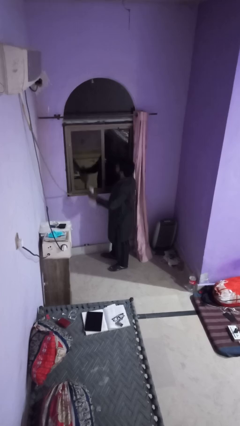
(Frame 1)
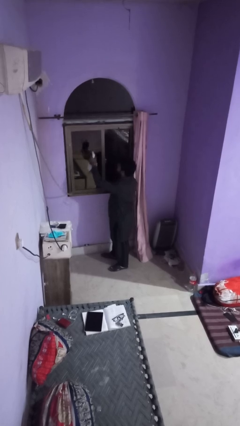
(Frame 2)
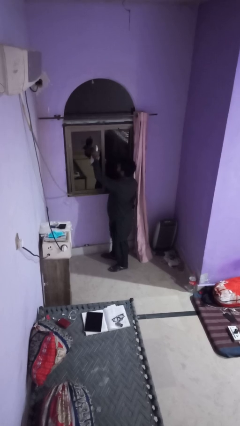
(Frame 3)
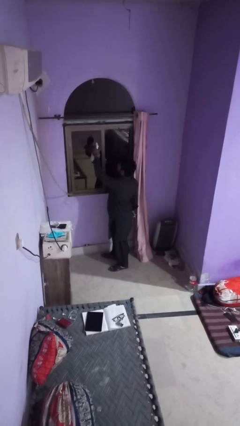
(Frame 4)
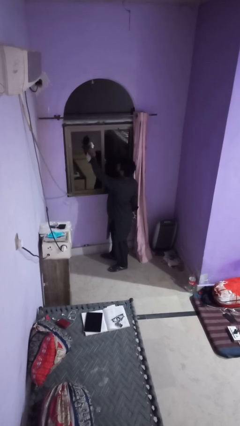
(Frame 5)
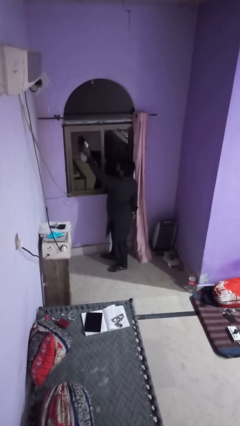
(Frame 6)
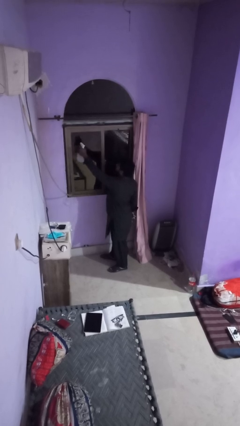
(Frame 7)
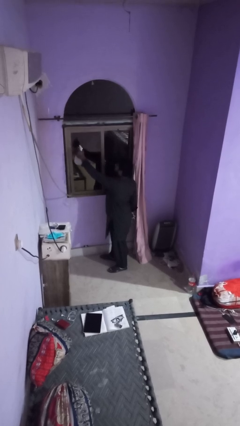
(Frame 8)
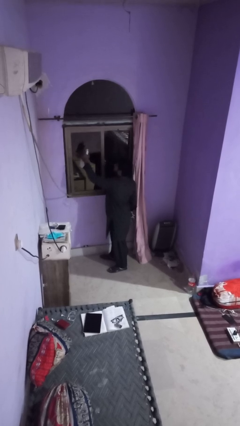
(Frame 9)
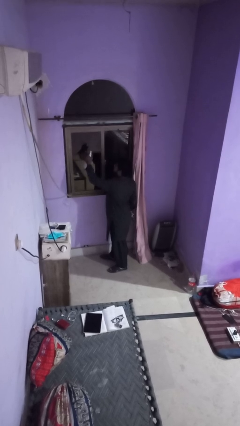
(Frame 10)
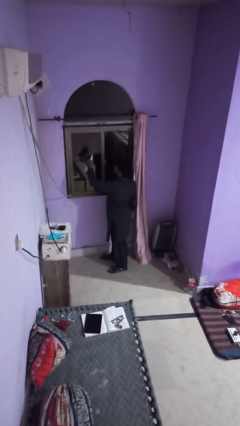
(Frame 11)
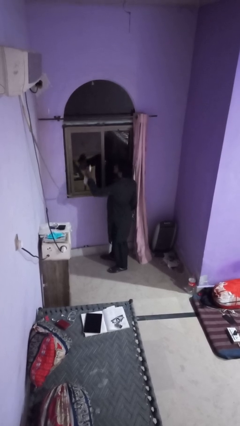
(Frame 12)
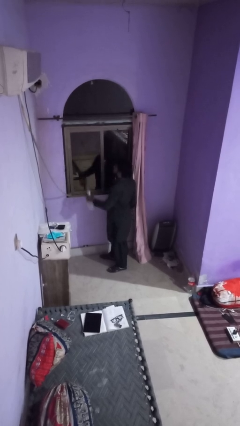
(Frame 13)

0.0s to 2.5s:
person sprays from bottle

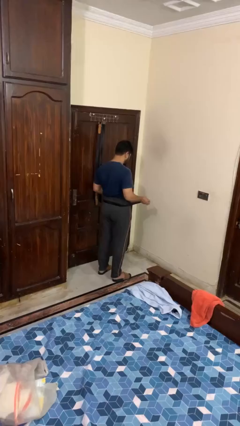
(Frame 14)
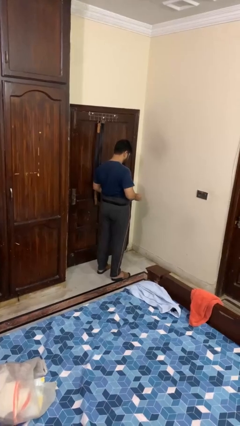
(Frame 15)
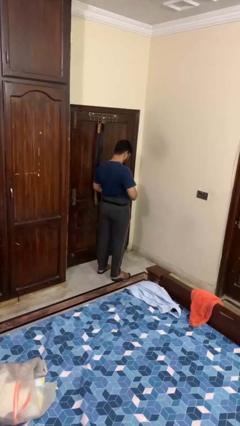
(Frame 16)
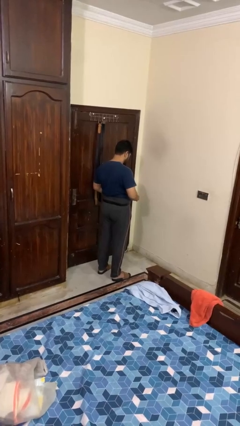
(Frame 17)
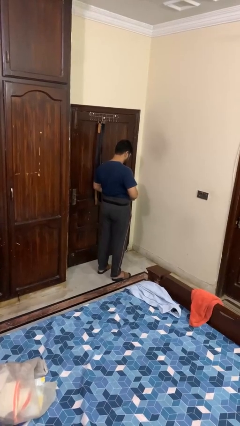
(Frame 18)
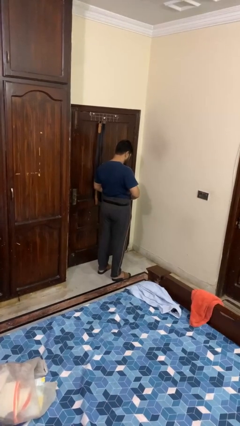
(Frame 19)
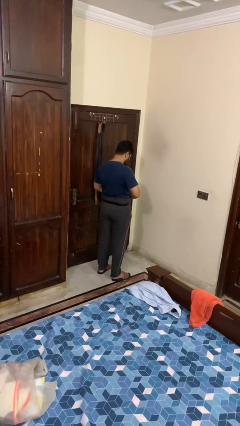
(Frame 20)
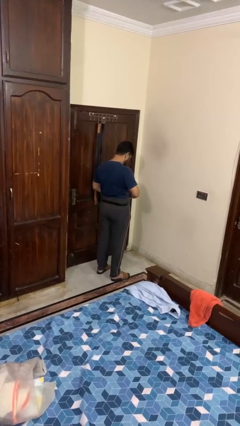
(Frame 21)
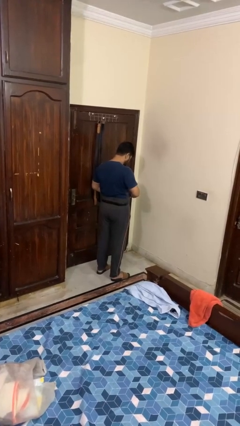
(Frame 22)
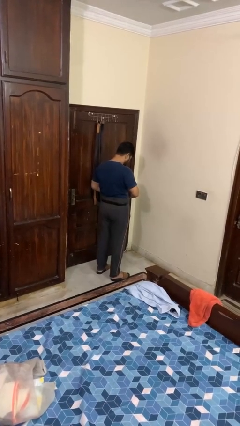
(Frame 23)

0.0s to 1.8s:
person puts on belt

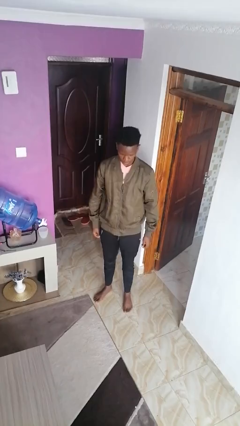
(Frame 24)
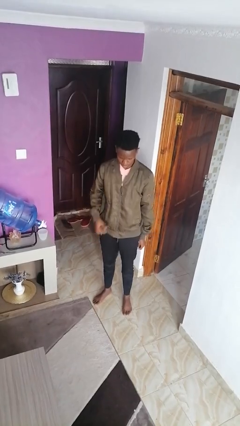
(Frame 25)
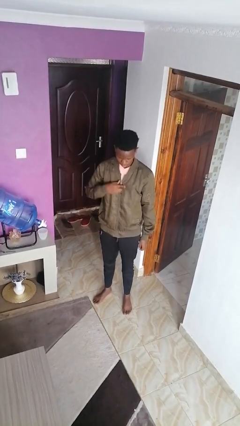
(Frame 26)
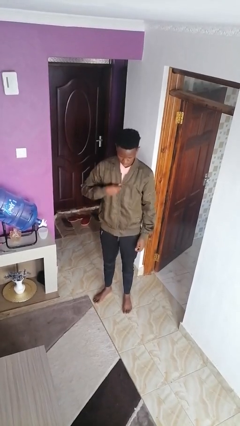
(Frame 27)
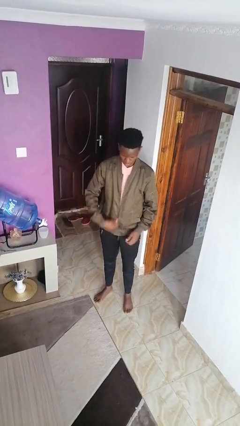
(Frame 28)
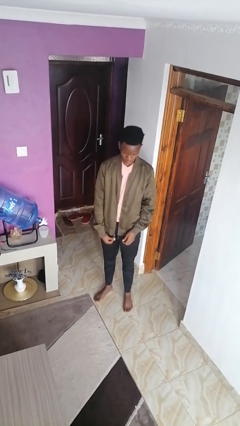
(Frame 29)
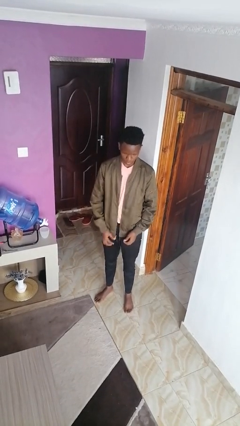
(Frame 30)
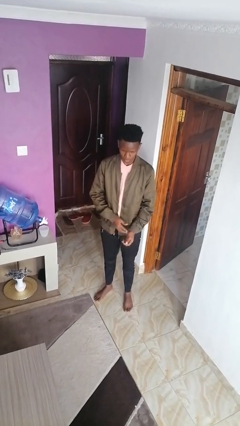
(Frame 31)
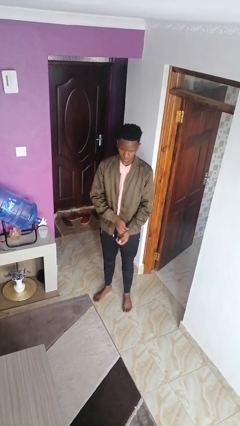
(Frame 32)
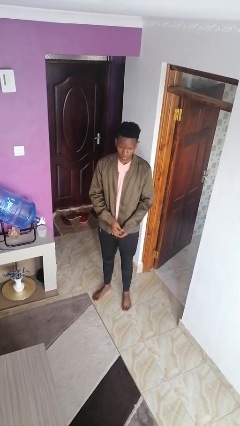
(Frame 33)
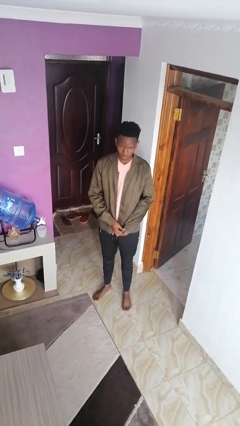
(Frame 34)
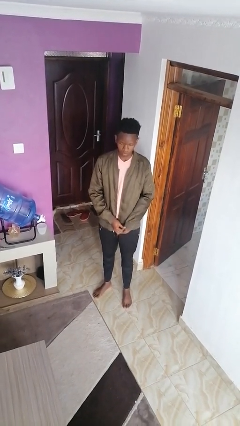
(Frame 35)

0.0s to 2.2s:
person unzips jacket

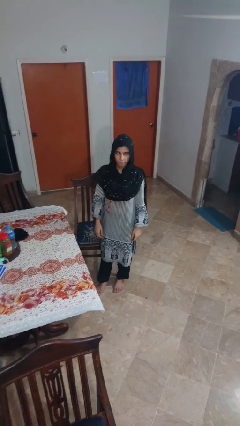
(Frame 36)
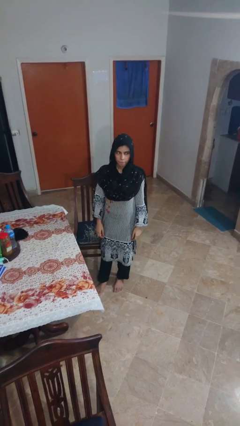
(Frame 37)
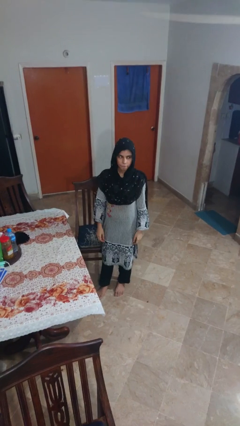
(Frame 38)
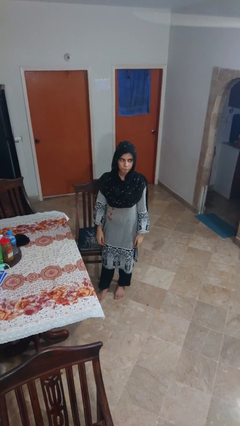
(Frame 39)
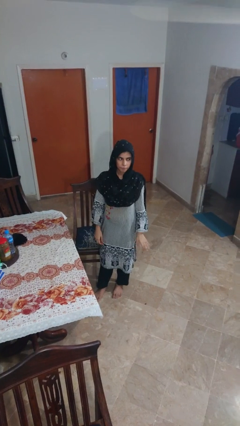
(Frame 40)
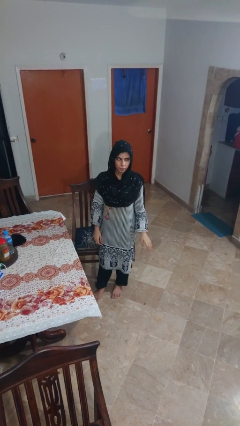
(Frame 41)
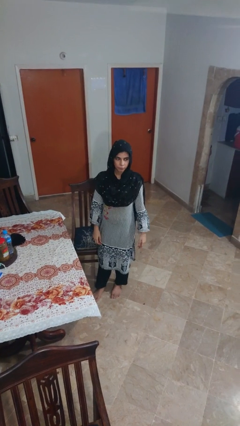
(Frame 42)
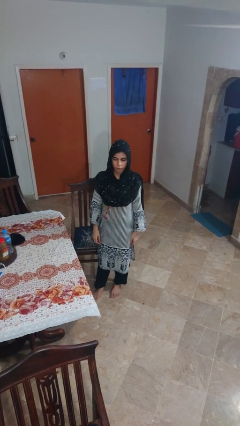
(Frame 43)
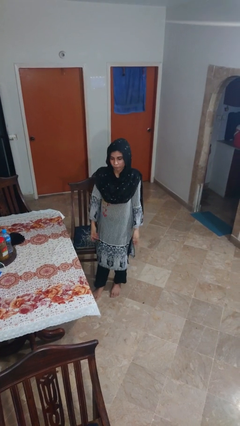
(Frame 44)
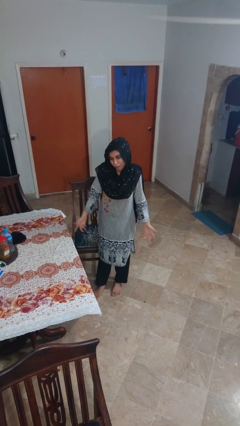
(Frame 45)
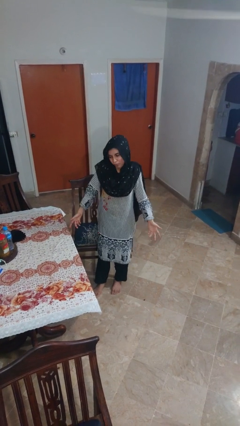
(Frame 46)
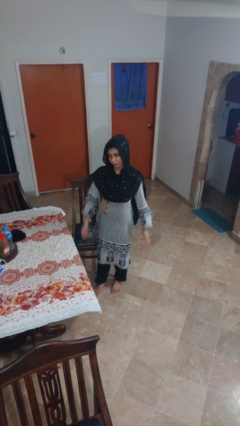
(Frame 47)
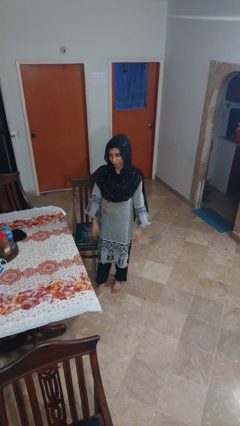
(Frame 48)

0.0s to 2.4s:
person shrugs

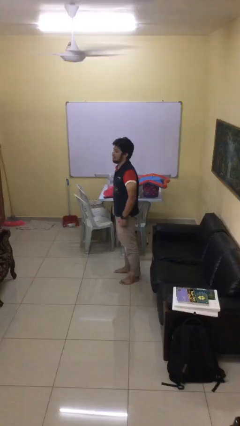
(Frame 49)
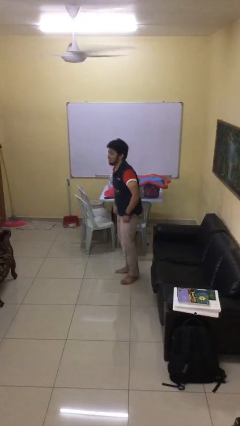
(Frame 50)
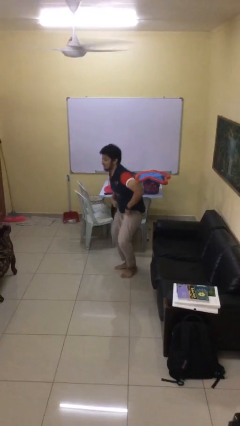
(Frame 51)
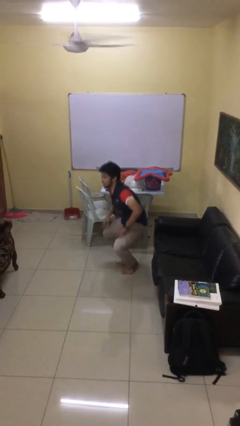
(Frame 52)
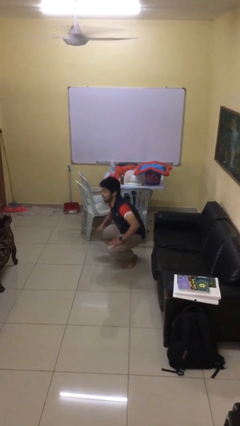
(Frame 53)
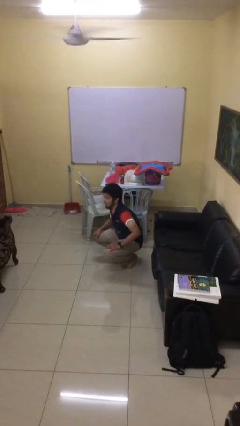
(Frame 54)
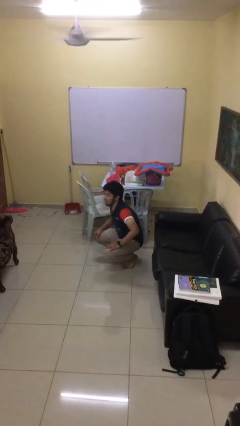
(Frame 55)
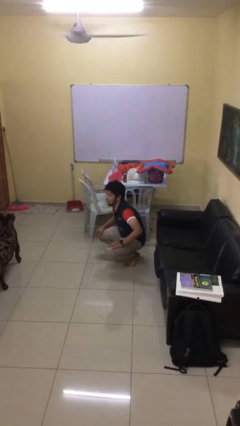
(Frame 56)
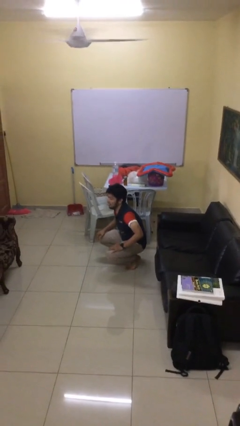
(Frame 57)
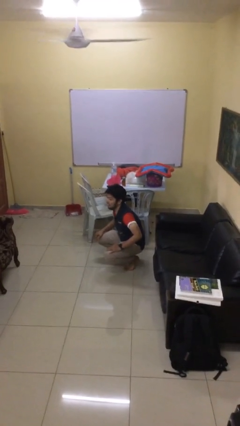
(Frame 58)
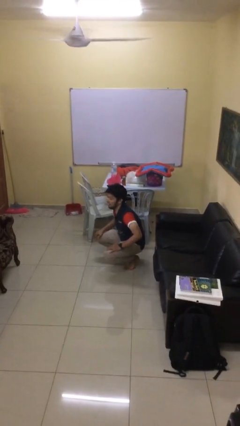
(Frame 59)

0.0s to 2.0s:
person squats

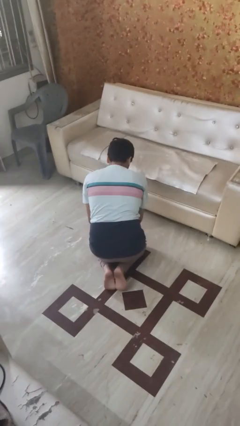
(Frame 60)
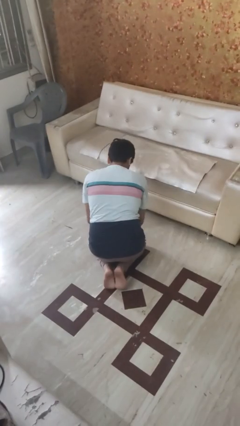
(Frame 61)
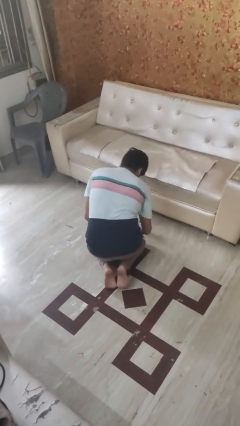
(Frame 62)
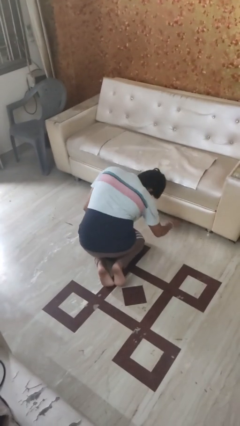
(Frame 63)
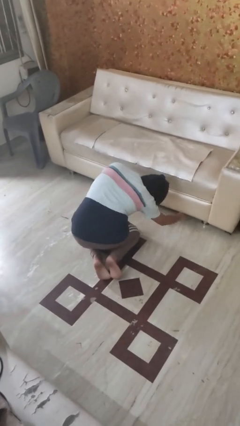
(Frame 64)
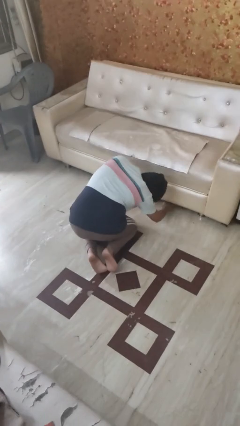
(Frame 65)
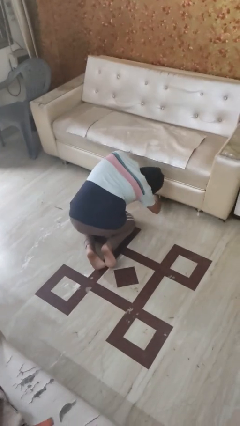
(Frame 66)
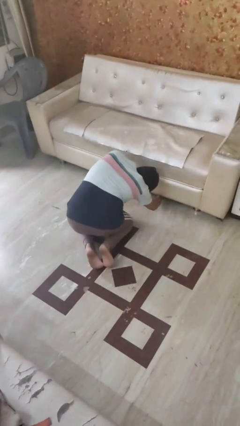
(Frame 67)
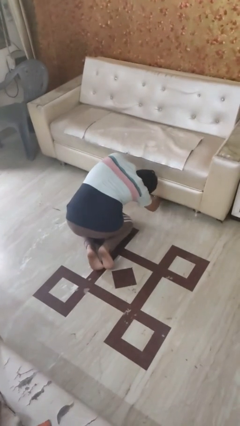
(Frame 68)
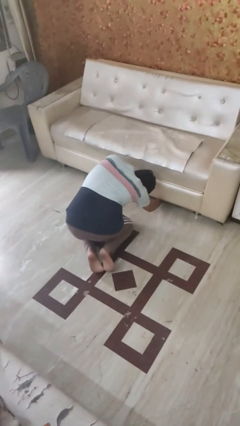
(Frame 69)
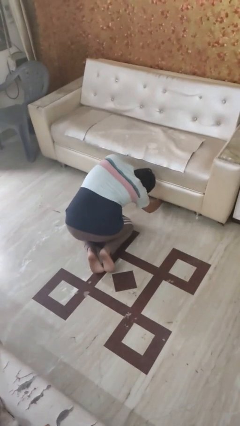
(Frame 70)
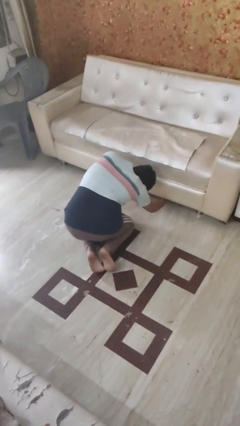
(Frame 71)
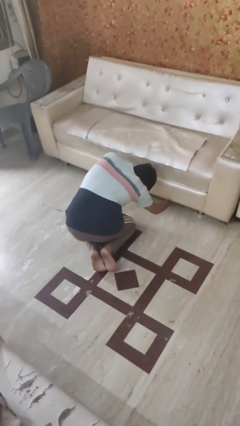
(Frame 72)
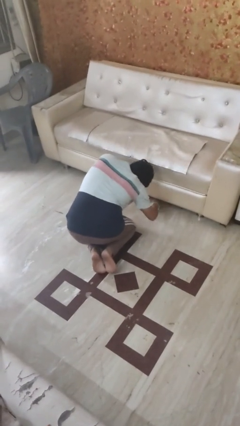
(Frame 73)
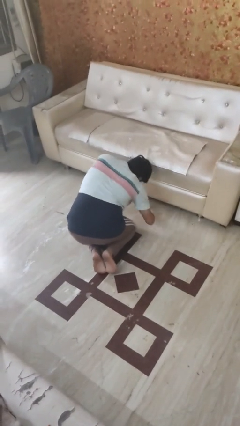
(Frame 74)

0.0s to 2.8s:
person searches under bed

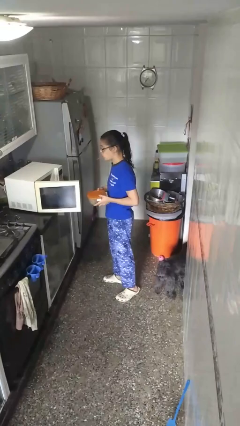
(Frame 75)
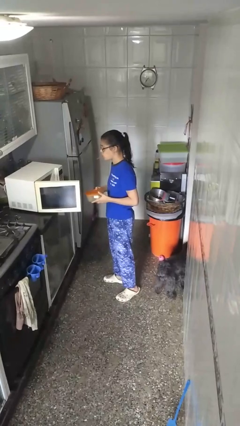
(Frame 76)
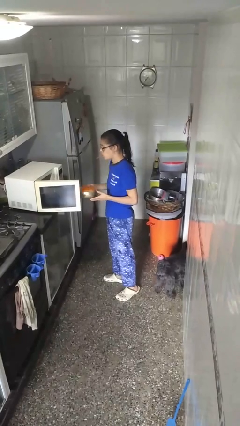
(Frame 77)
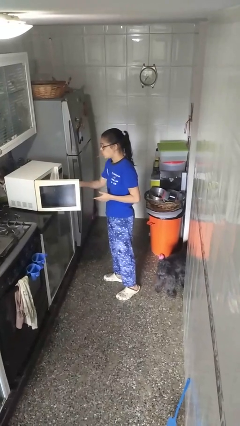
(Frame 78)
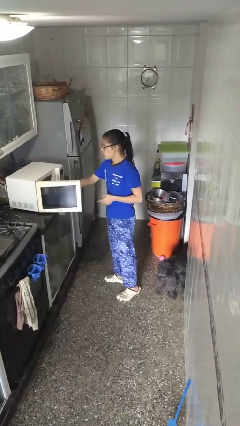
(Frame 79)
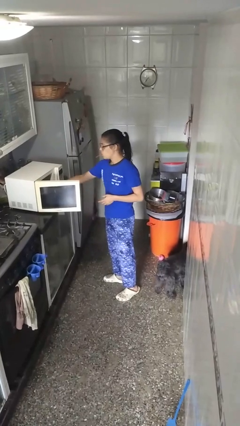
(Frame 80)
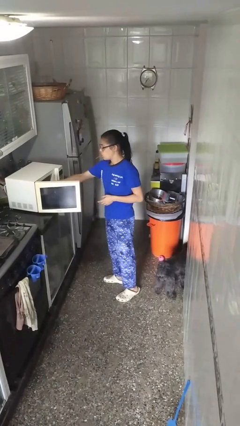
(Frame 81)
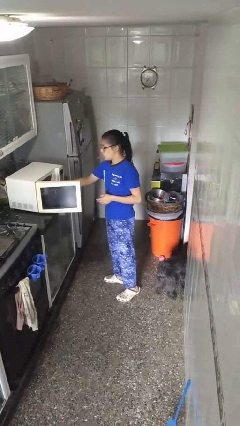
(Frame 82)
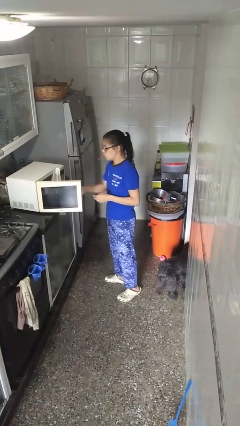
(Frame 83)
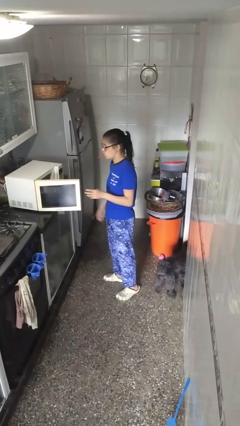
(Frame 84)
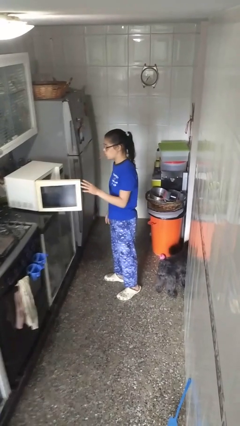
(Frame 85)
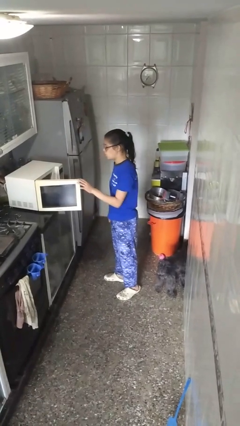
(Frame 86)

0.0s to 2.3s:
person puts object into microwave

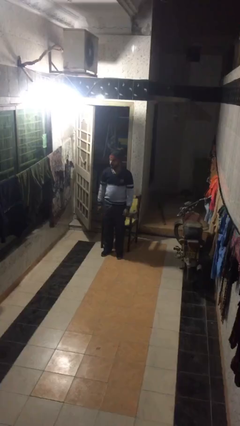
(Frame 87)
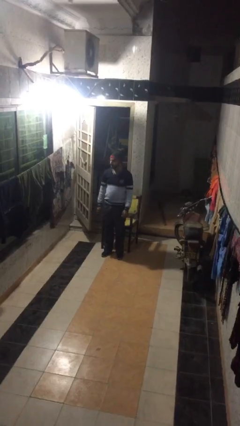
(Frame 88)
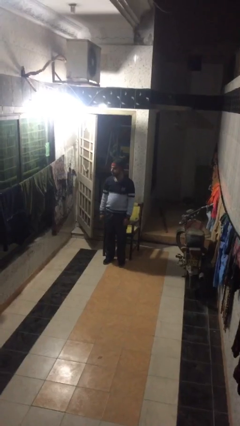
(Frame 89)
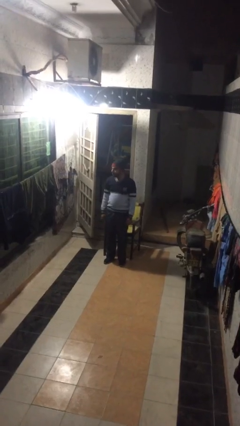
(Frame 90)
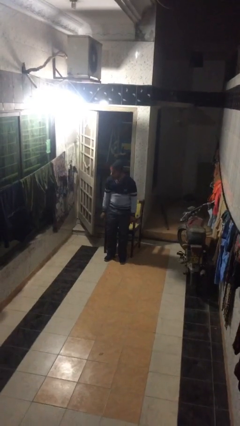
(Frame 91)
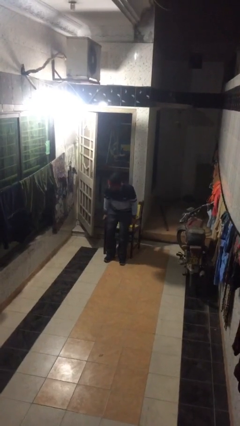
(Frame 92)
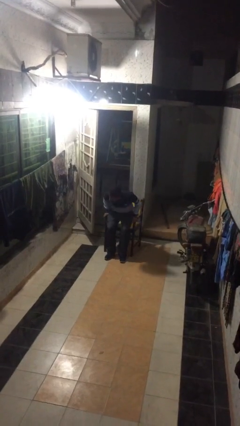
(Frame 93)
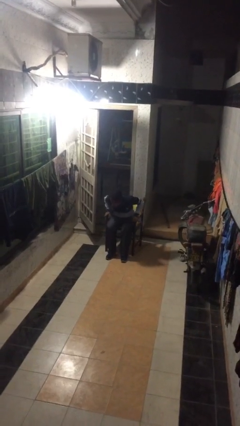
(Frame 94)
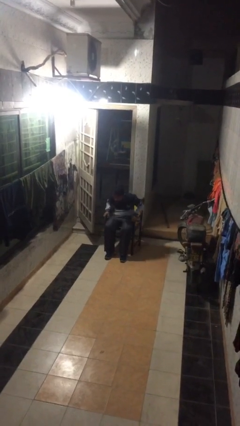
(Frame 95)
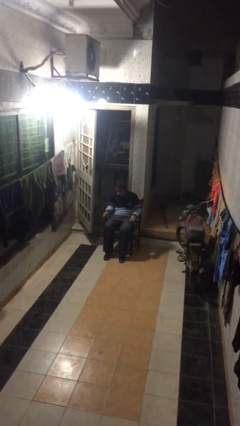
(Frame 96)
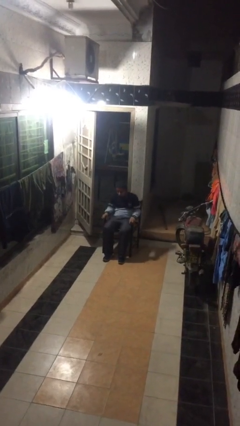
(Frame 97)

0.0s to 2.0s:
person sits down
